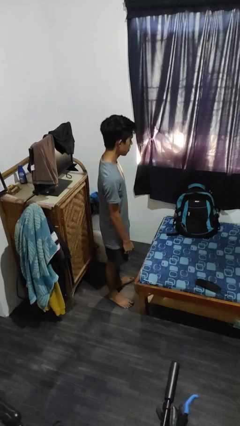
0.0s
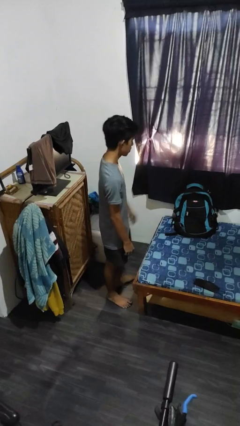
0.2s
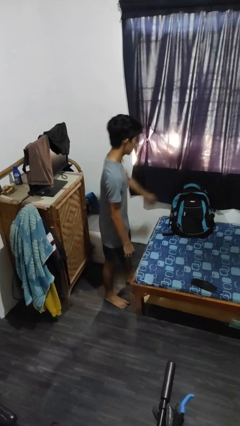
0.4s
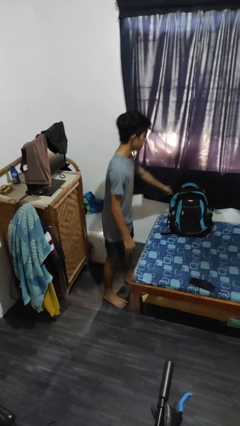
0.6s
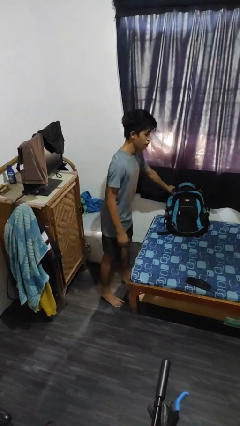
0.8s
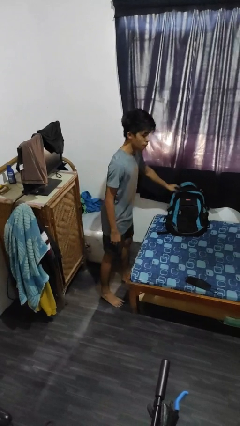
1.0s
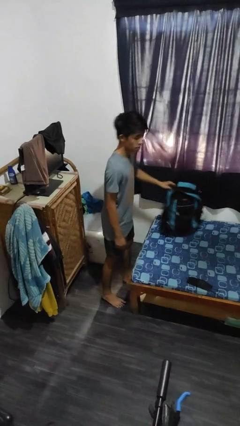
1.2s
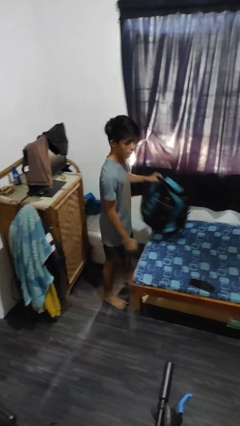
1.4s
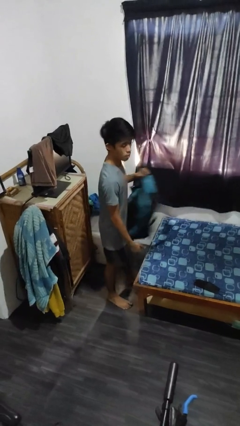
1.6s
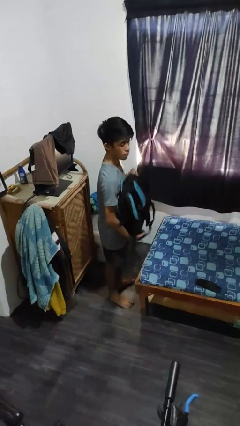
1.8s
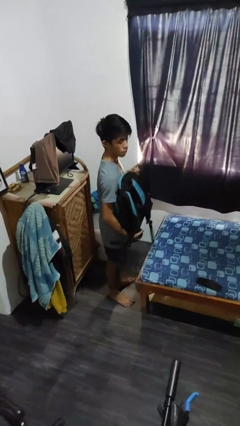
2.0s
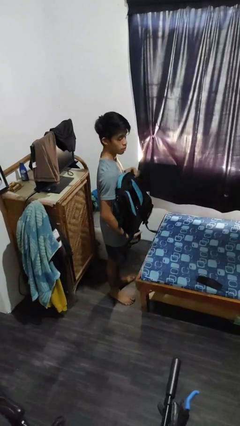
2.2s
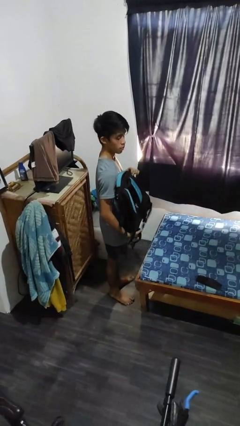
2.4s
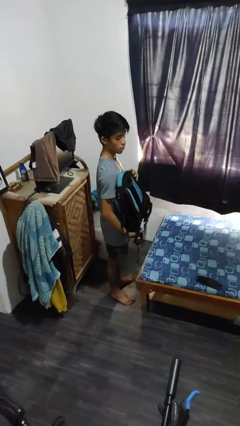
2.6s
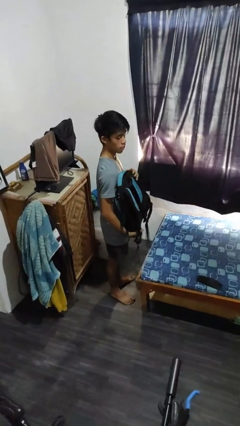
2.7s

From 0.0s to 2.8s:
person picks up object from bed

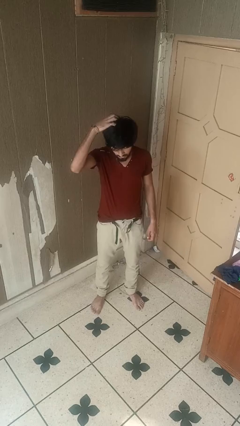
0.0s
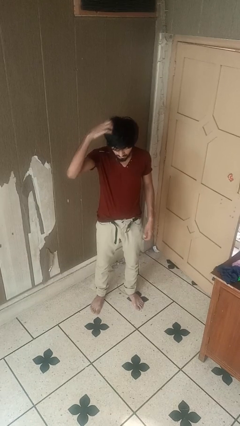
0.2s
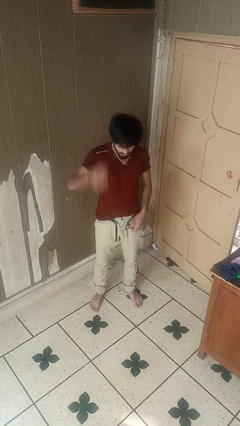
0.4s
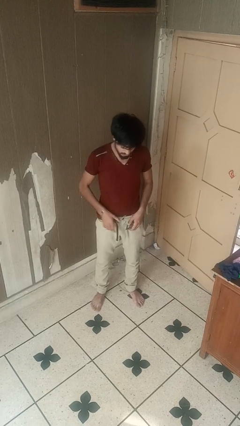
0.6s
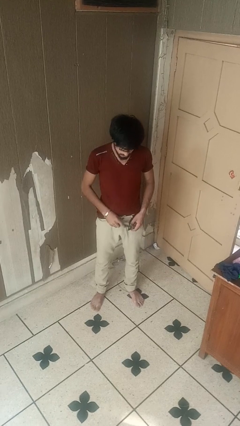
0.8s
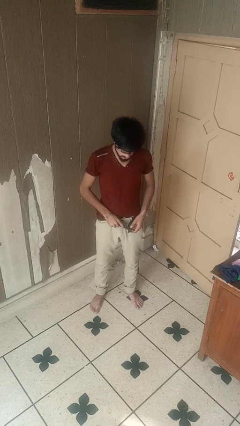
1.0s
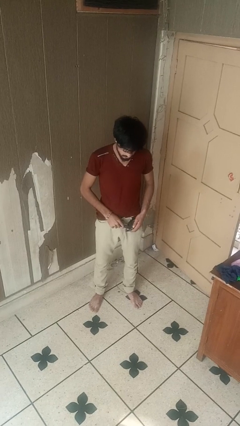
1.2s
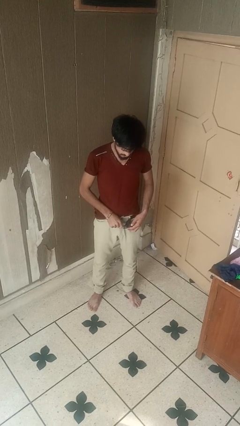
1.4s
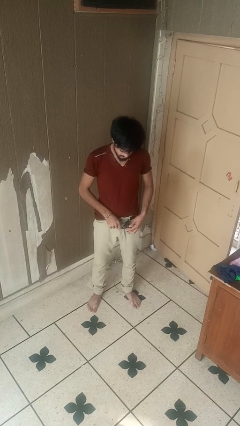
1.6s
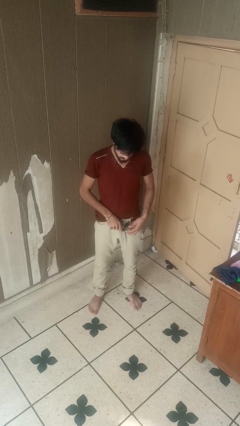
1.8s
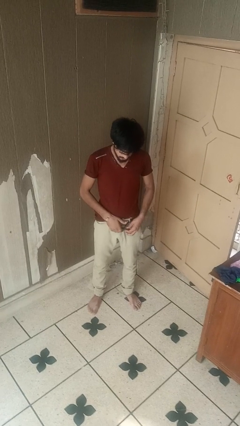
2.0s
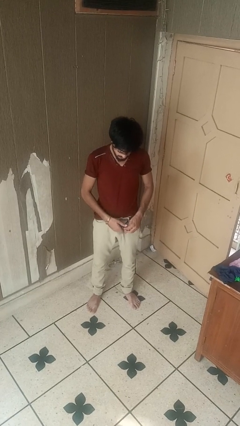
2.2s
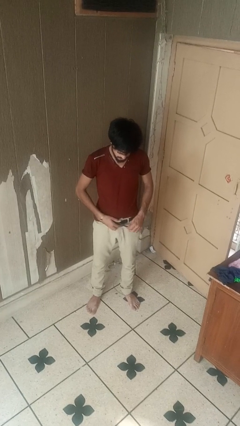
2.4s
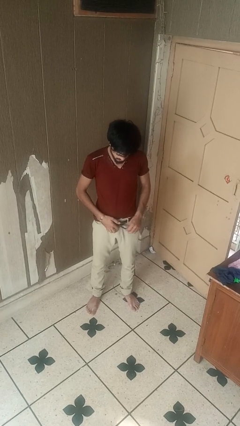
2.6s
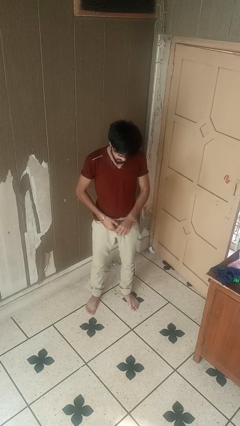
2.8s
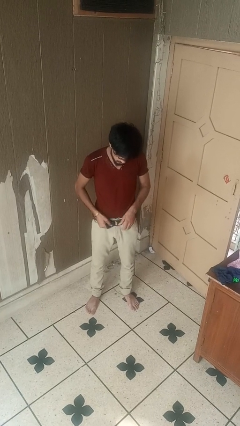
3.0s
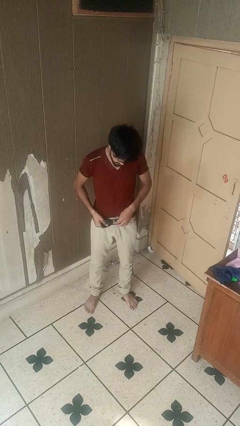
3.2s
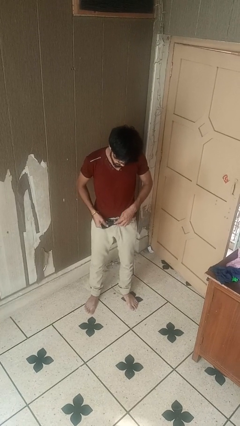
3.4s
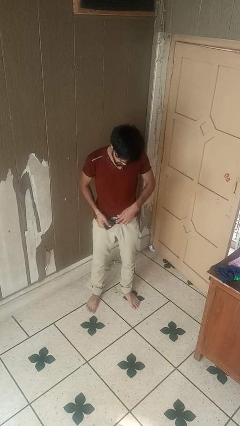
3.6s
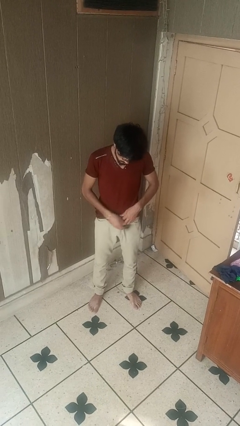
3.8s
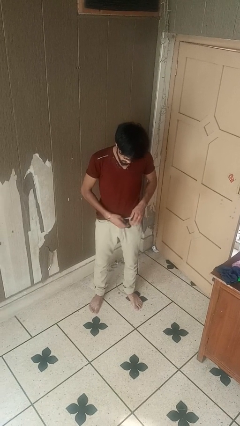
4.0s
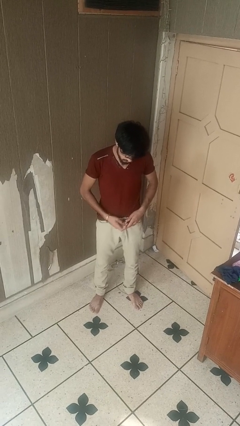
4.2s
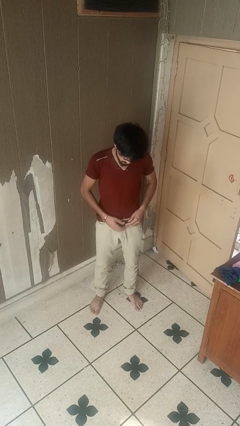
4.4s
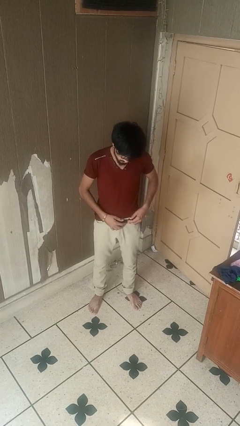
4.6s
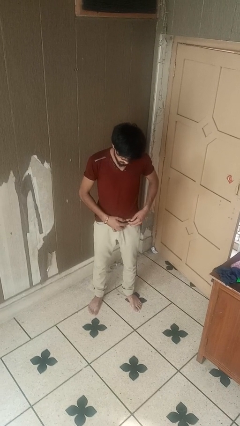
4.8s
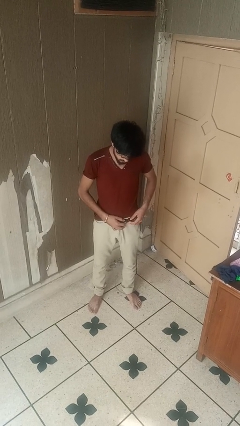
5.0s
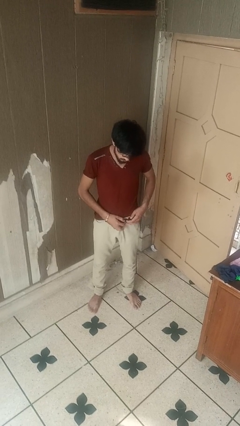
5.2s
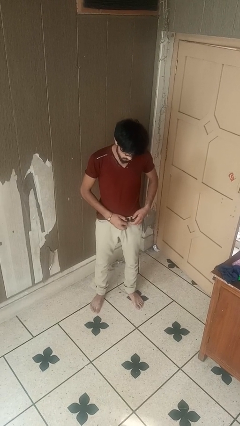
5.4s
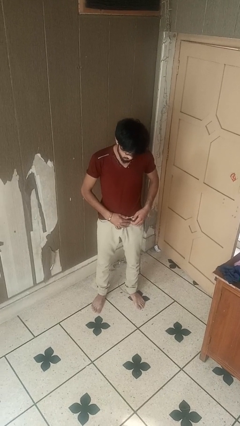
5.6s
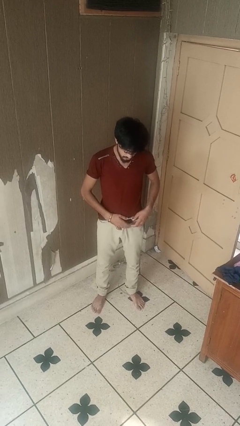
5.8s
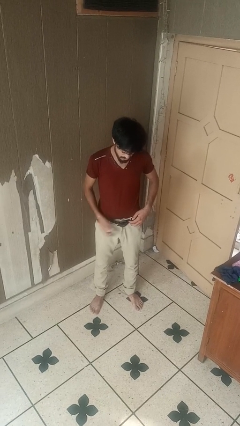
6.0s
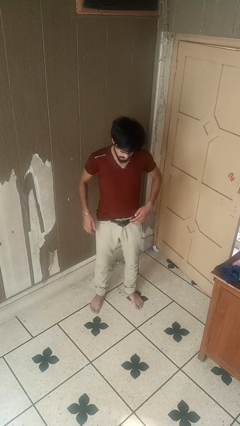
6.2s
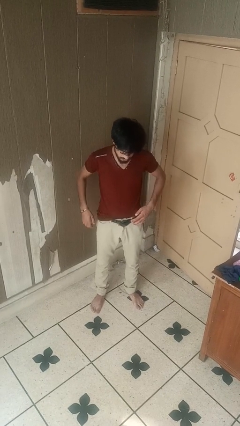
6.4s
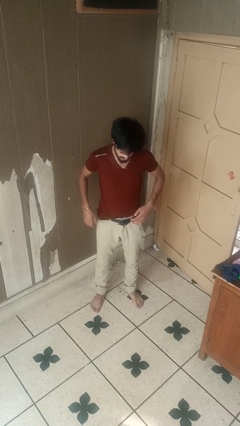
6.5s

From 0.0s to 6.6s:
person puts on belt

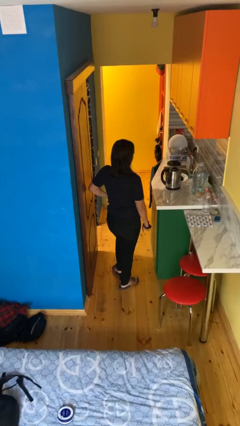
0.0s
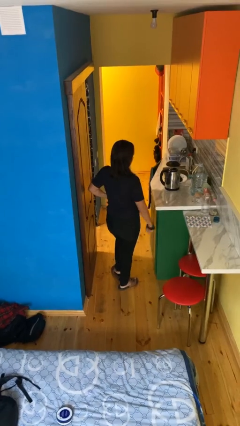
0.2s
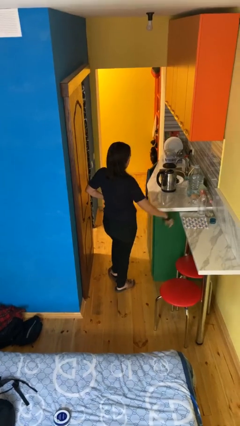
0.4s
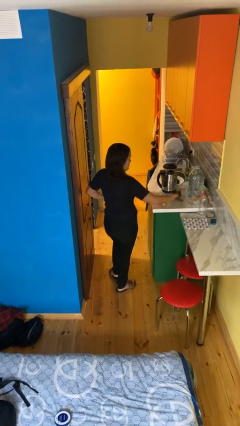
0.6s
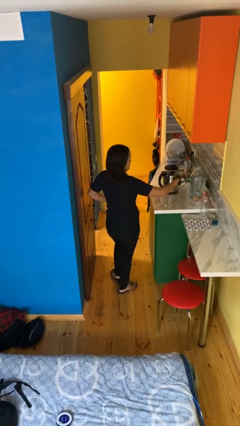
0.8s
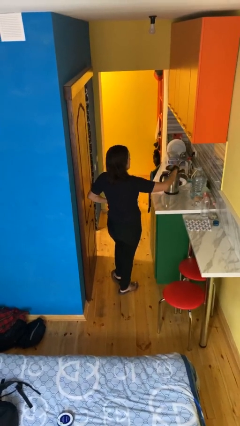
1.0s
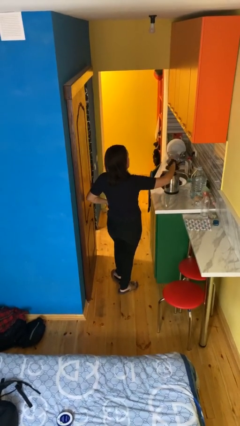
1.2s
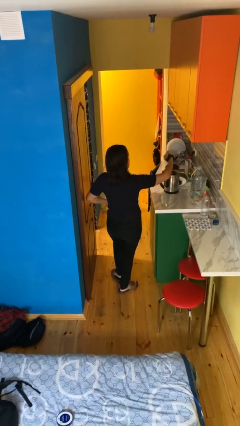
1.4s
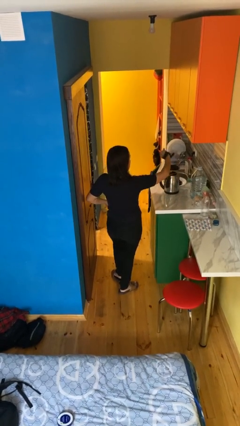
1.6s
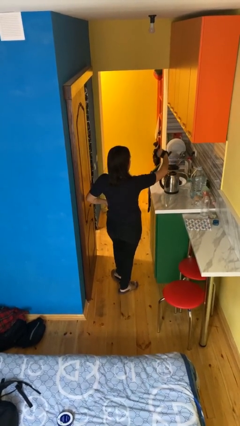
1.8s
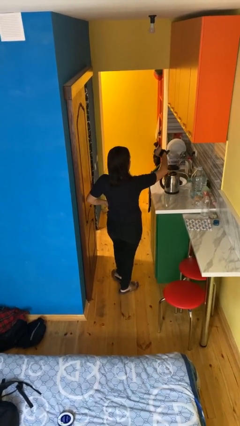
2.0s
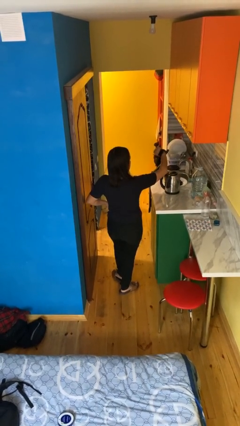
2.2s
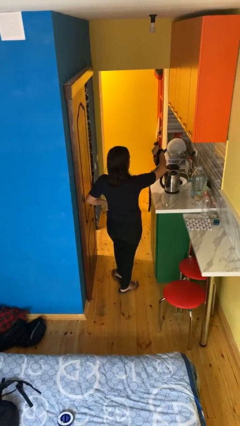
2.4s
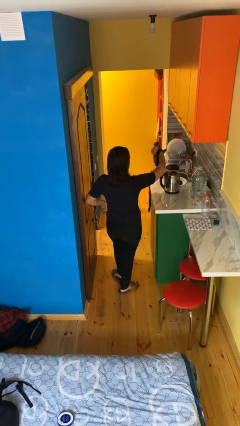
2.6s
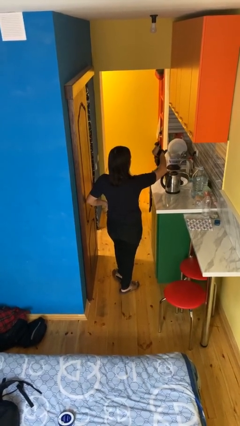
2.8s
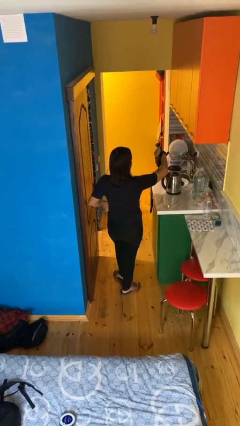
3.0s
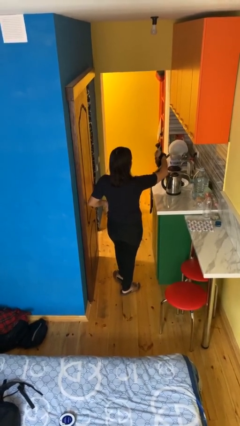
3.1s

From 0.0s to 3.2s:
person looks at wristwatch

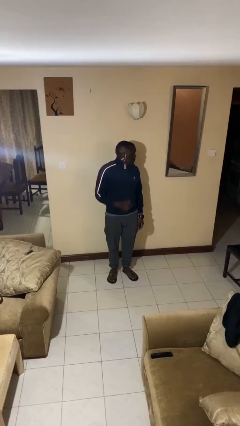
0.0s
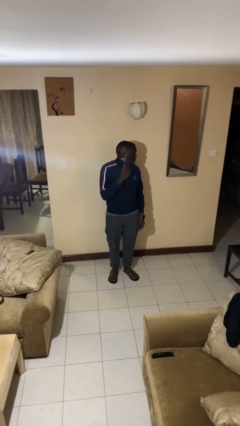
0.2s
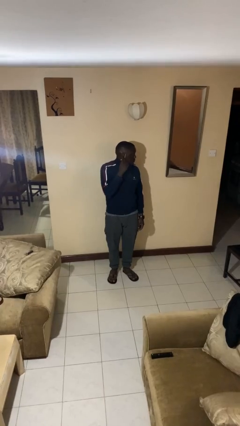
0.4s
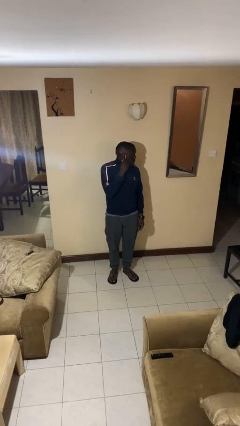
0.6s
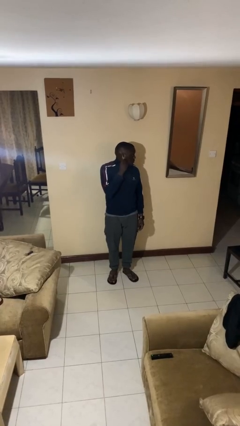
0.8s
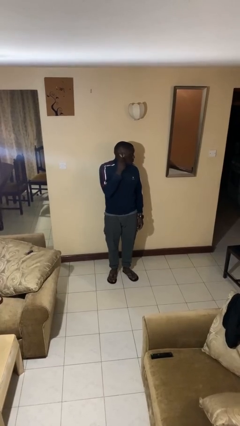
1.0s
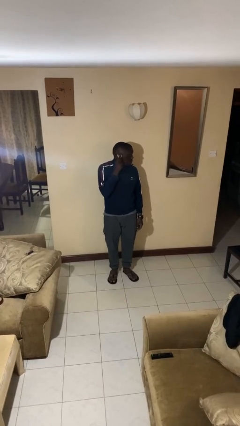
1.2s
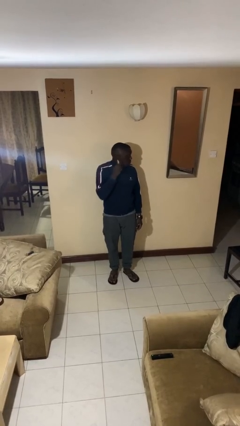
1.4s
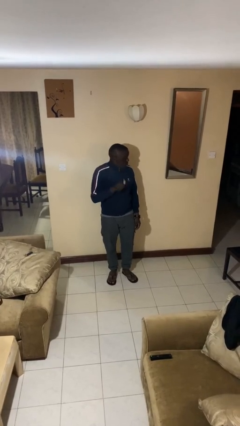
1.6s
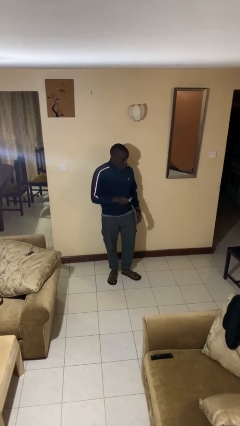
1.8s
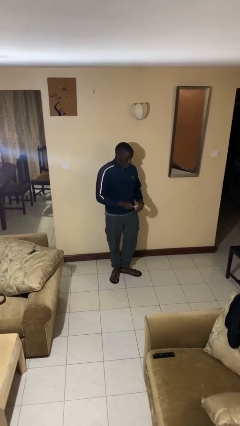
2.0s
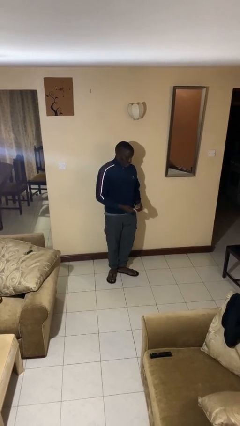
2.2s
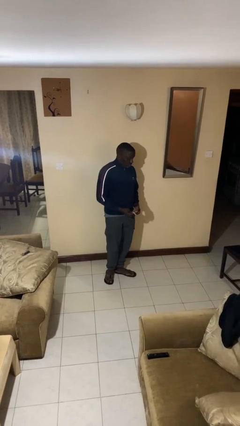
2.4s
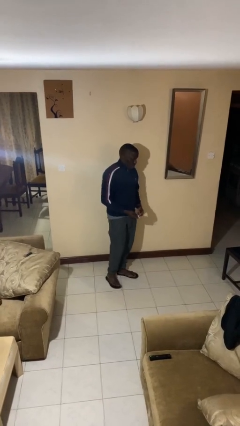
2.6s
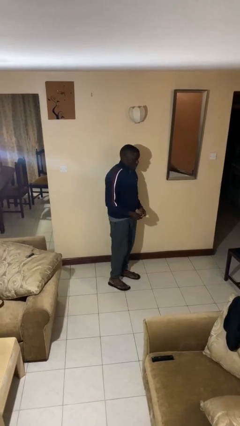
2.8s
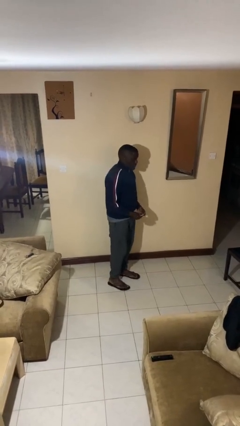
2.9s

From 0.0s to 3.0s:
person takes off earrings

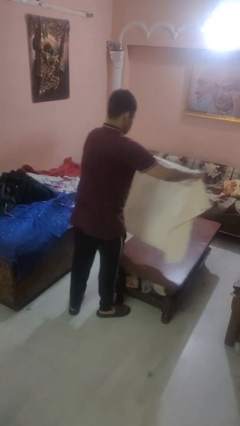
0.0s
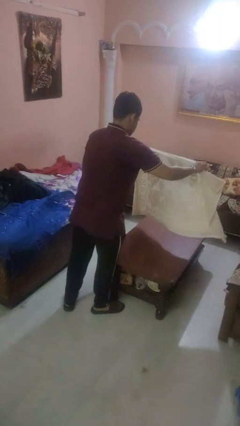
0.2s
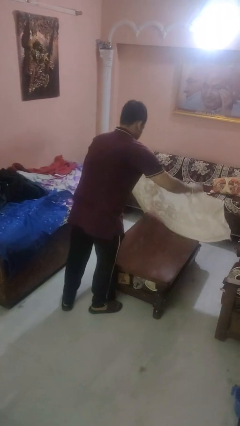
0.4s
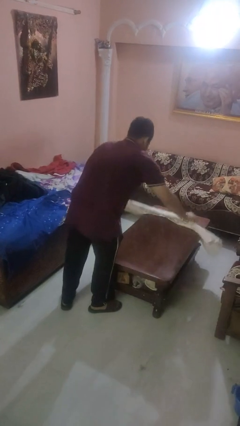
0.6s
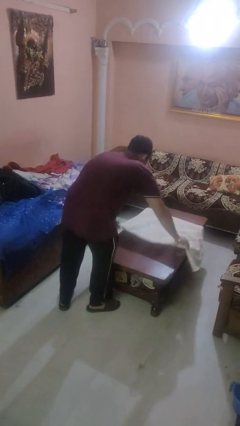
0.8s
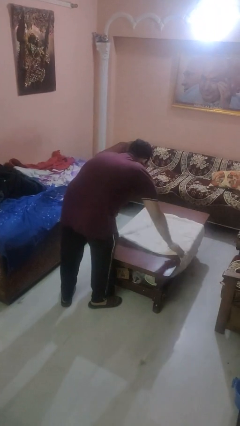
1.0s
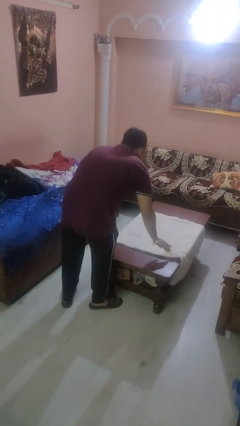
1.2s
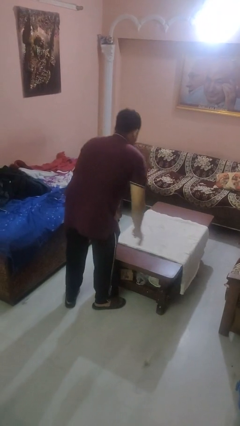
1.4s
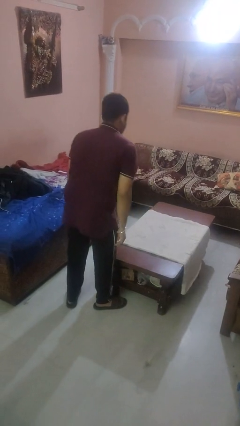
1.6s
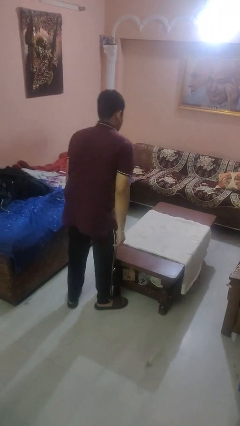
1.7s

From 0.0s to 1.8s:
person spreads tablecloth
